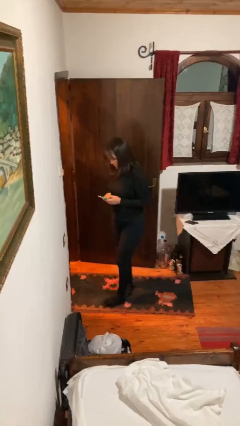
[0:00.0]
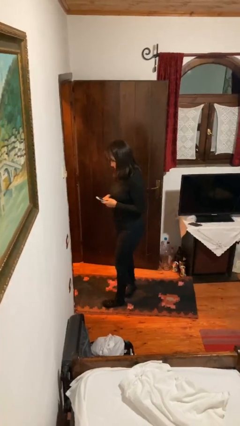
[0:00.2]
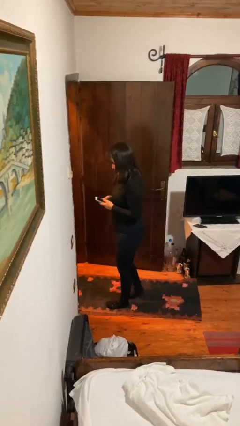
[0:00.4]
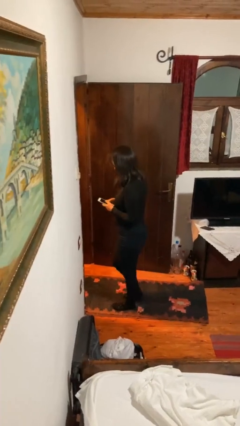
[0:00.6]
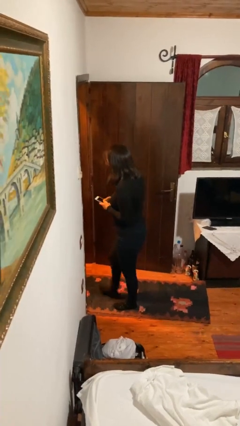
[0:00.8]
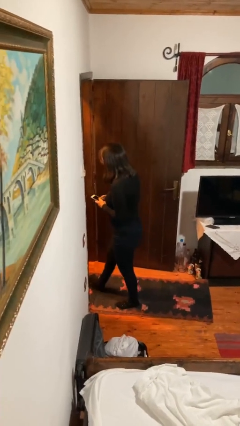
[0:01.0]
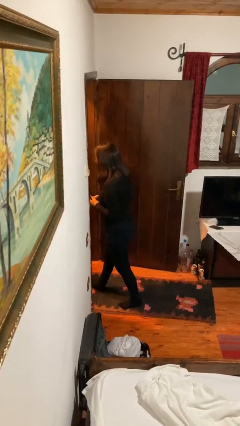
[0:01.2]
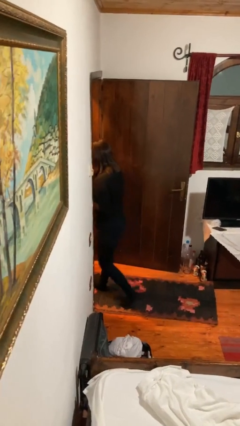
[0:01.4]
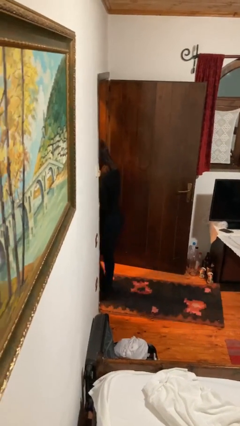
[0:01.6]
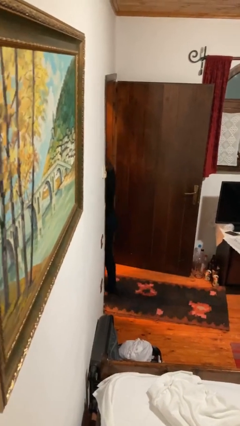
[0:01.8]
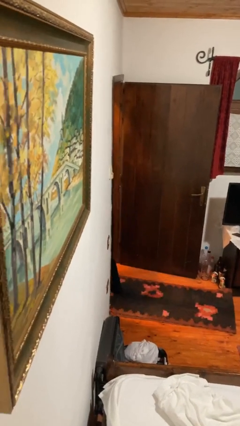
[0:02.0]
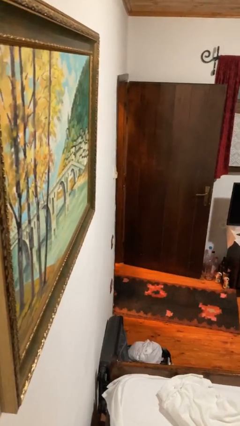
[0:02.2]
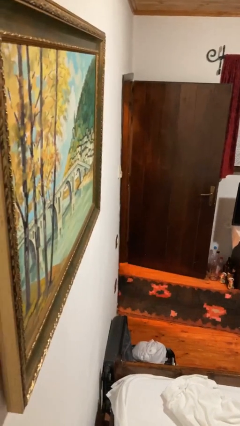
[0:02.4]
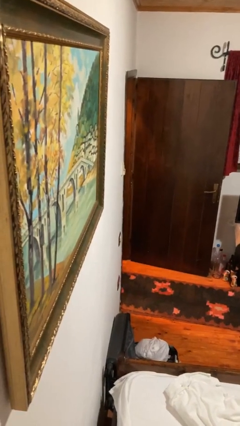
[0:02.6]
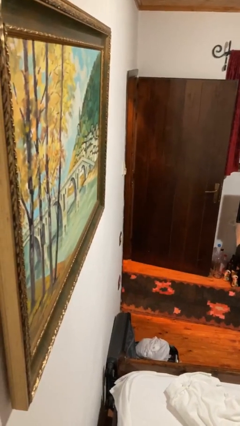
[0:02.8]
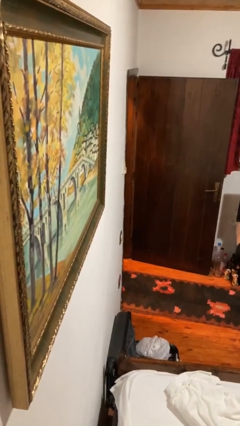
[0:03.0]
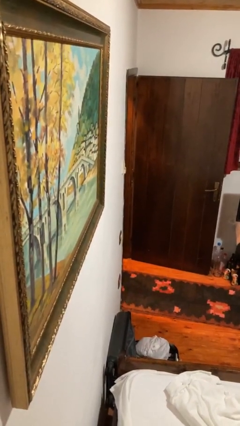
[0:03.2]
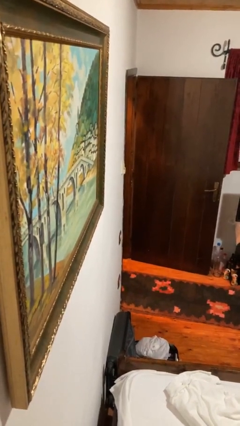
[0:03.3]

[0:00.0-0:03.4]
person exits scene through structure

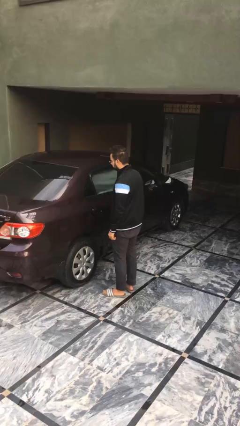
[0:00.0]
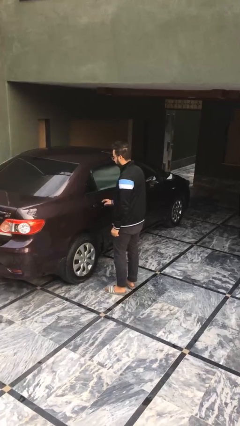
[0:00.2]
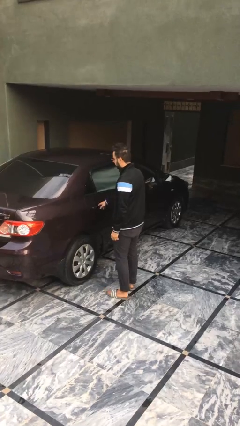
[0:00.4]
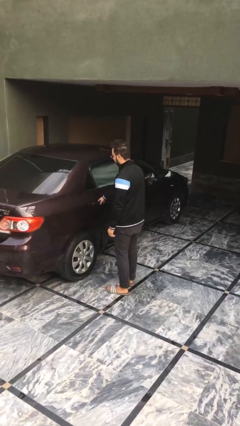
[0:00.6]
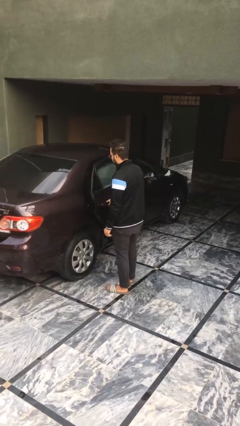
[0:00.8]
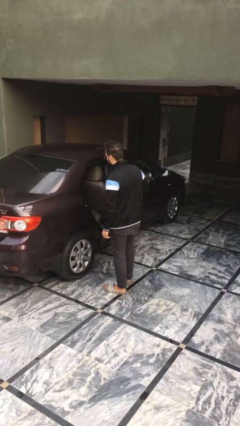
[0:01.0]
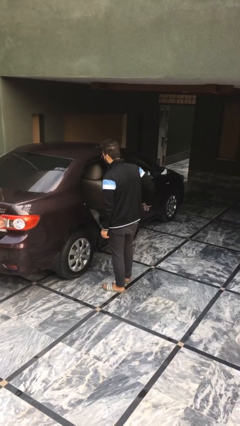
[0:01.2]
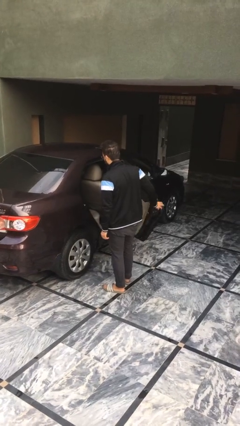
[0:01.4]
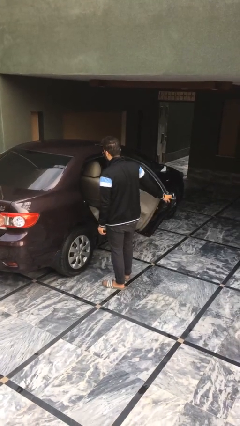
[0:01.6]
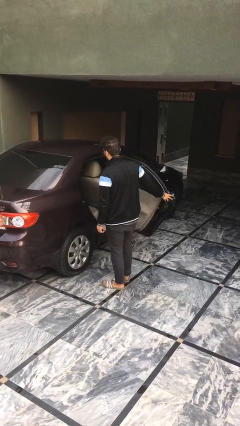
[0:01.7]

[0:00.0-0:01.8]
person opens car door

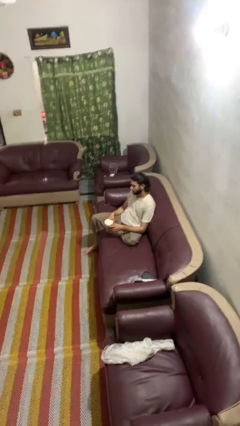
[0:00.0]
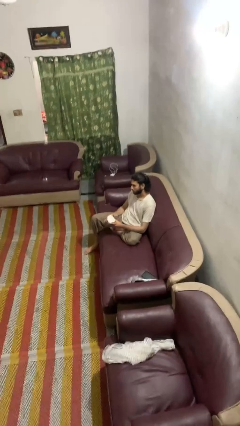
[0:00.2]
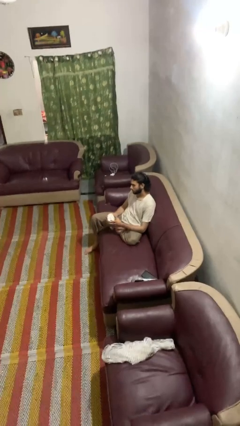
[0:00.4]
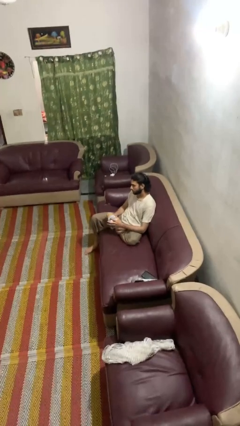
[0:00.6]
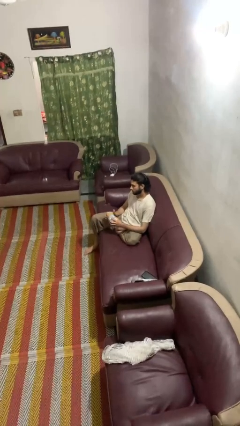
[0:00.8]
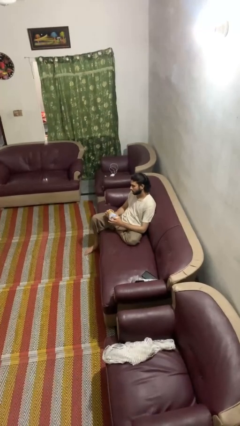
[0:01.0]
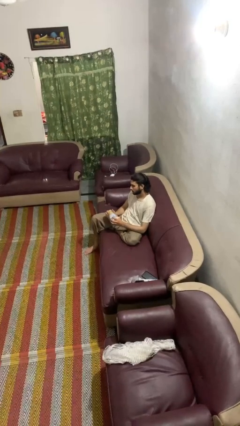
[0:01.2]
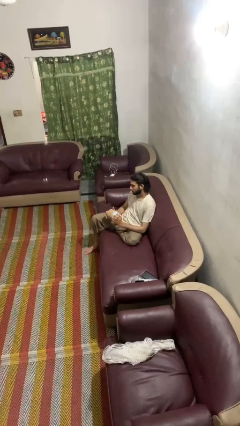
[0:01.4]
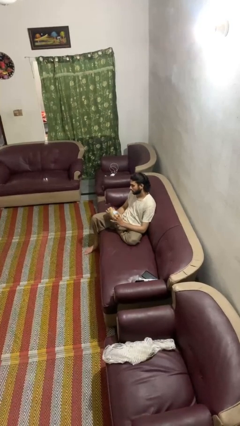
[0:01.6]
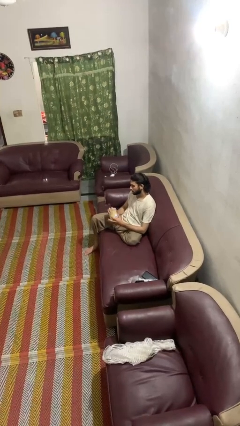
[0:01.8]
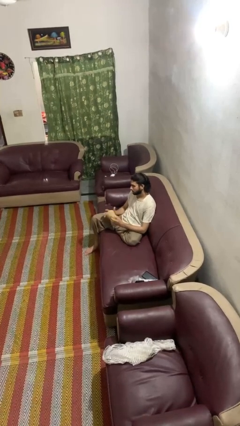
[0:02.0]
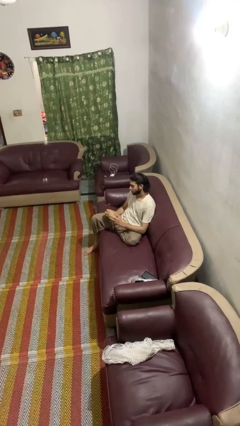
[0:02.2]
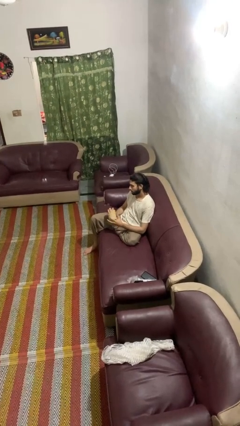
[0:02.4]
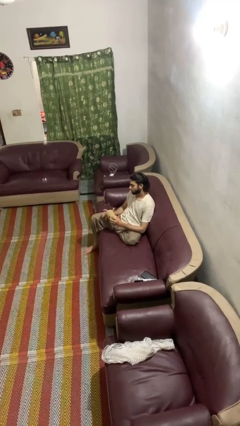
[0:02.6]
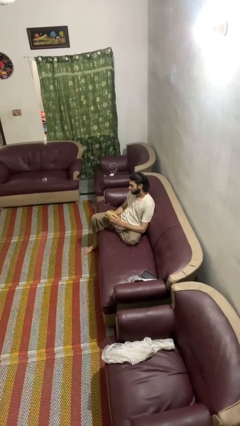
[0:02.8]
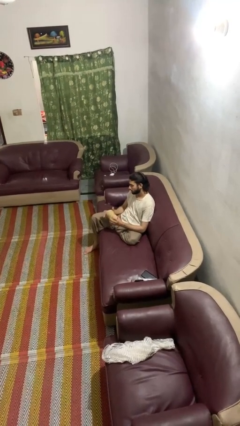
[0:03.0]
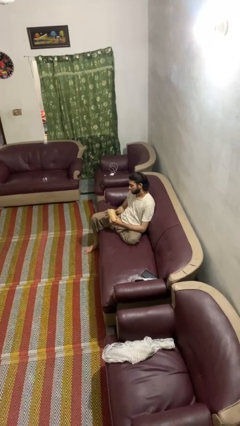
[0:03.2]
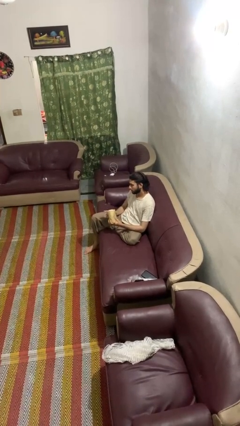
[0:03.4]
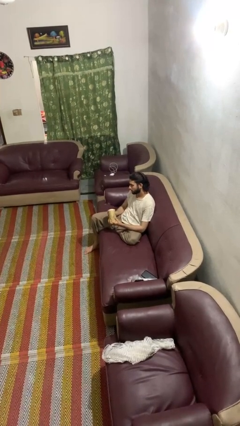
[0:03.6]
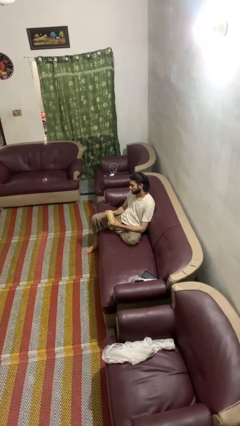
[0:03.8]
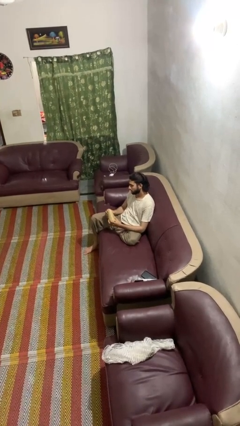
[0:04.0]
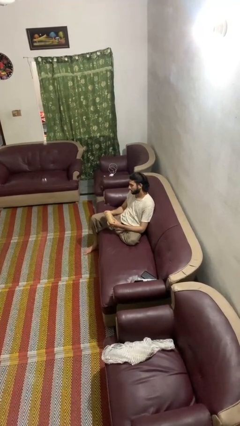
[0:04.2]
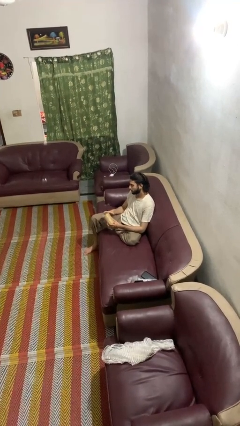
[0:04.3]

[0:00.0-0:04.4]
person squeezes object

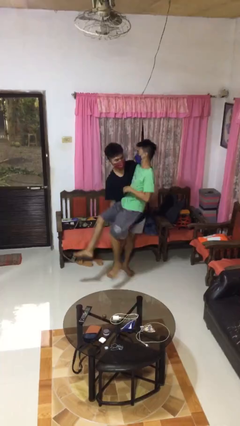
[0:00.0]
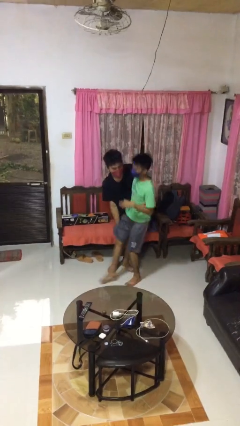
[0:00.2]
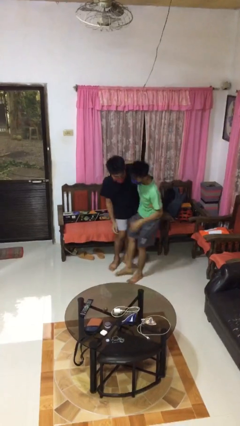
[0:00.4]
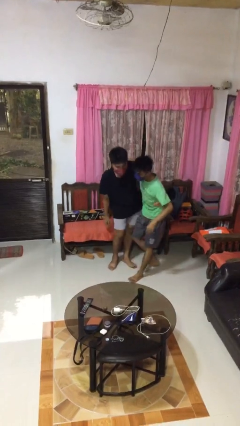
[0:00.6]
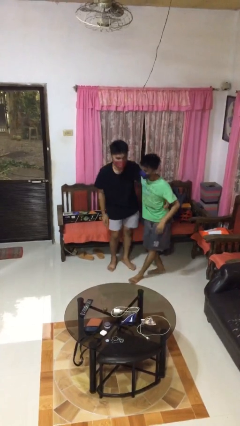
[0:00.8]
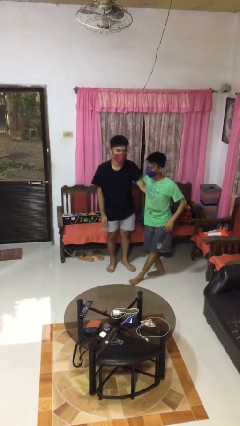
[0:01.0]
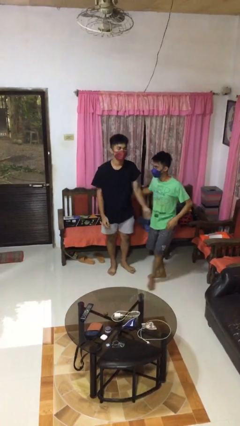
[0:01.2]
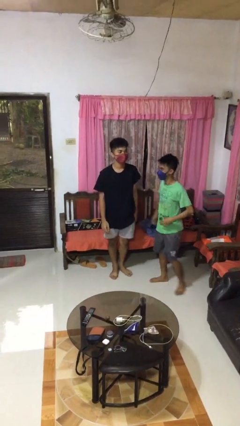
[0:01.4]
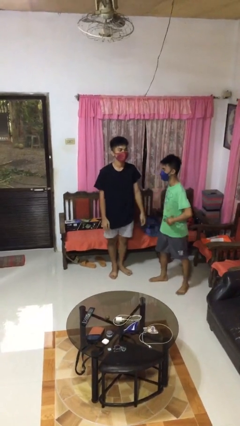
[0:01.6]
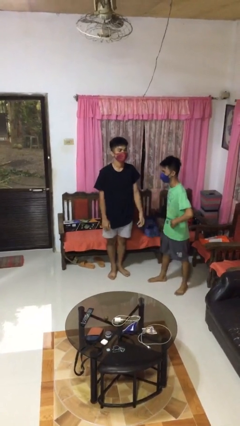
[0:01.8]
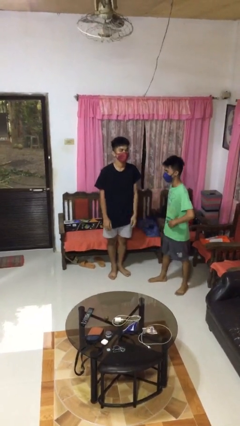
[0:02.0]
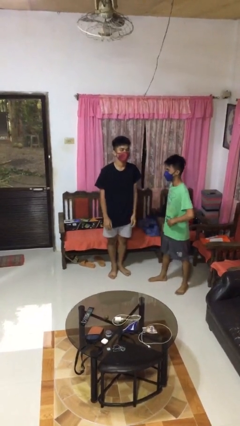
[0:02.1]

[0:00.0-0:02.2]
person puts down person

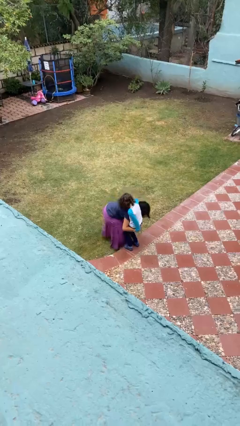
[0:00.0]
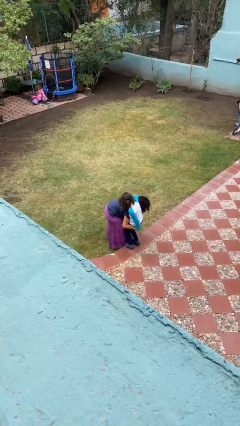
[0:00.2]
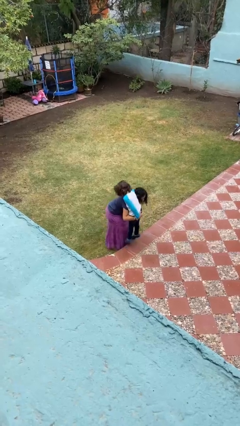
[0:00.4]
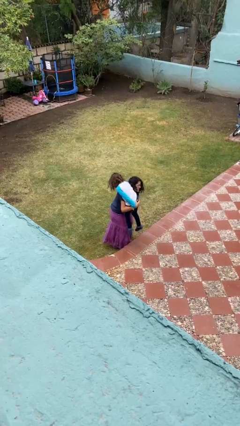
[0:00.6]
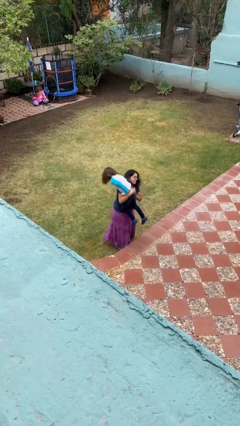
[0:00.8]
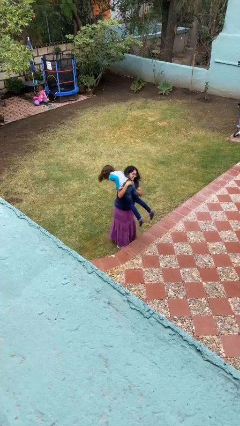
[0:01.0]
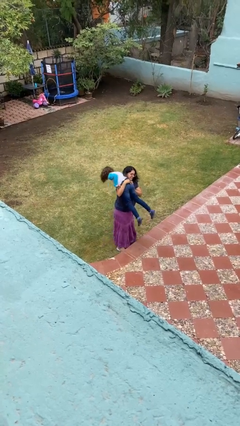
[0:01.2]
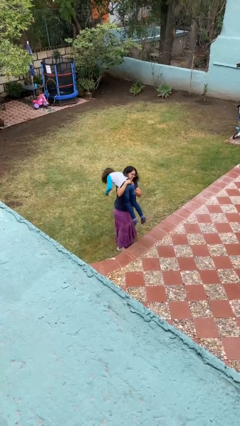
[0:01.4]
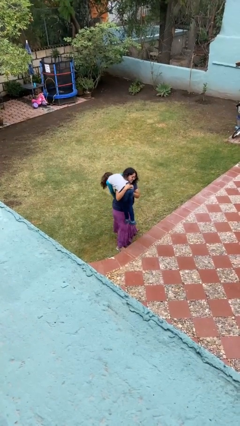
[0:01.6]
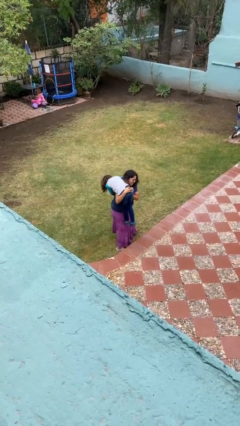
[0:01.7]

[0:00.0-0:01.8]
person carries person over shoulder

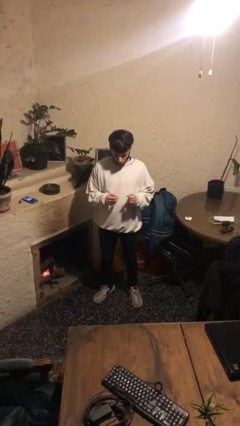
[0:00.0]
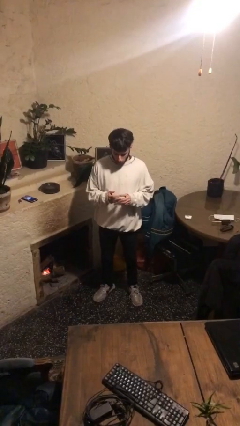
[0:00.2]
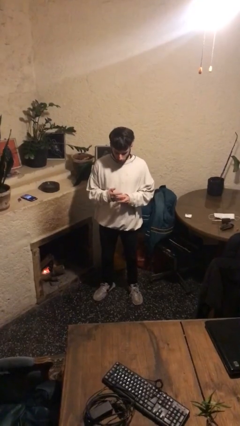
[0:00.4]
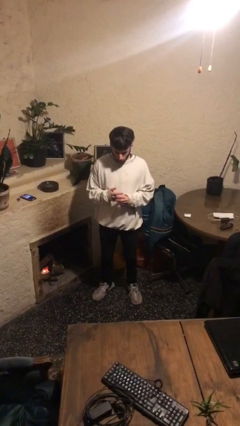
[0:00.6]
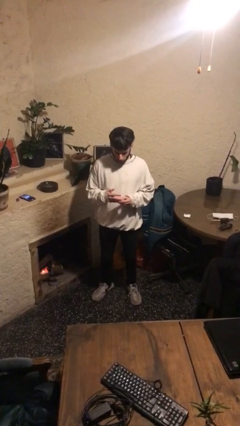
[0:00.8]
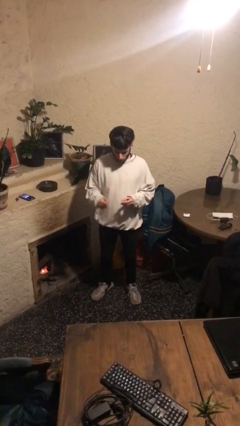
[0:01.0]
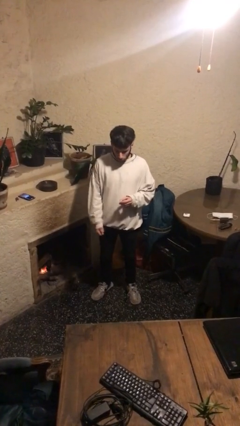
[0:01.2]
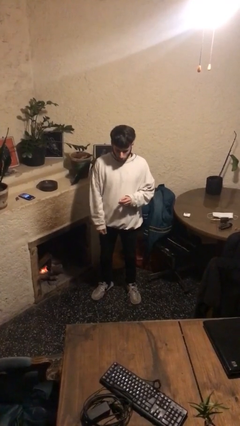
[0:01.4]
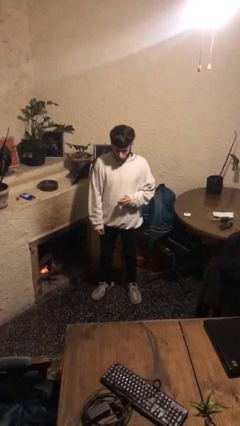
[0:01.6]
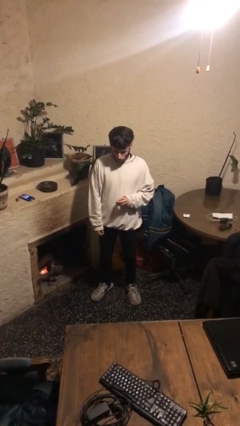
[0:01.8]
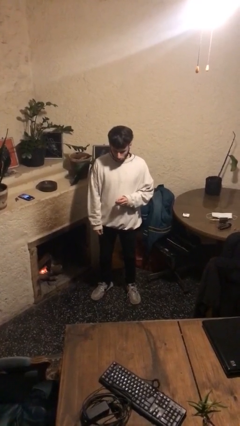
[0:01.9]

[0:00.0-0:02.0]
person takes off ring

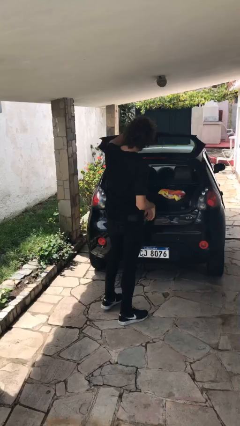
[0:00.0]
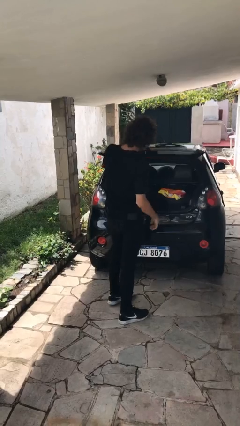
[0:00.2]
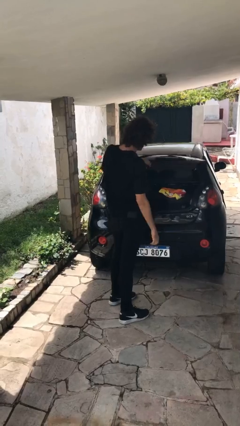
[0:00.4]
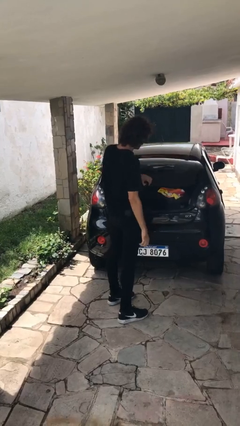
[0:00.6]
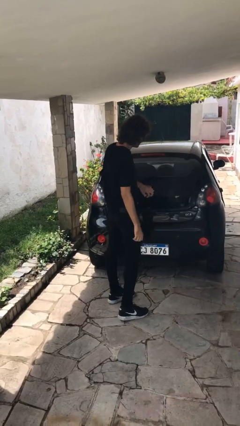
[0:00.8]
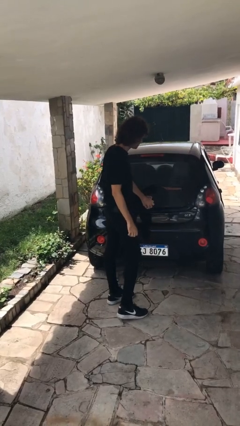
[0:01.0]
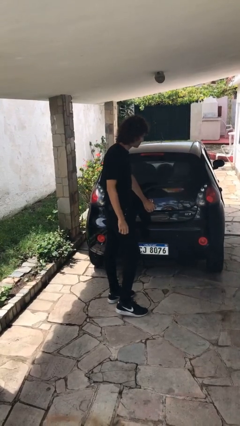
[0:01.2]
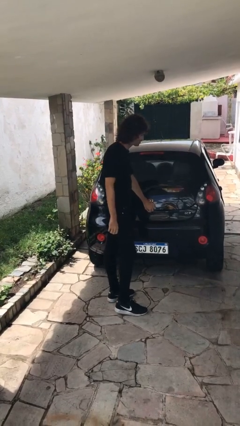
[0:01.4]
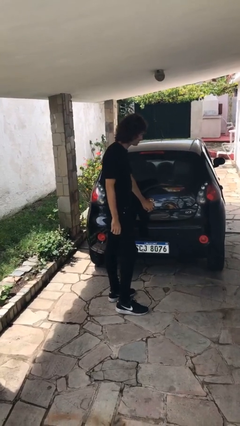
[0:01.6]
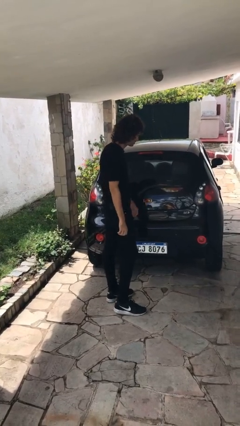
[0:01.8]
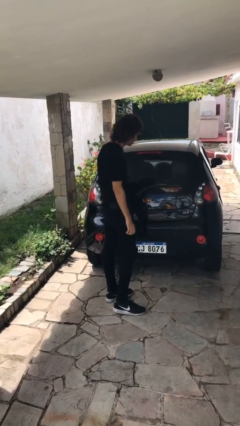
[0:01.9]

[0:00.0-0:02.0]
person closes car trunk
